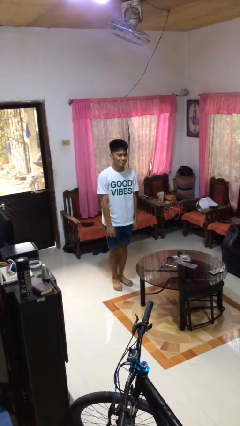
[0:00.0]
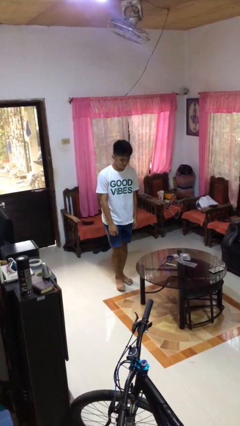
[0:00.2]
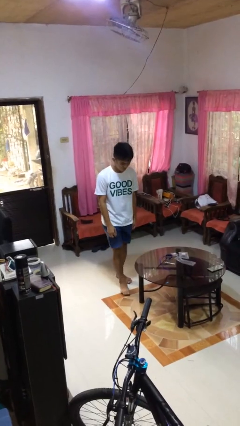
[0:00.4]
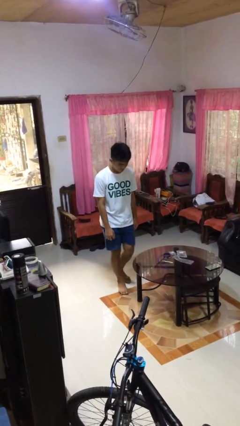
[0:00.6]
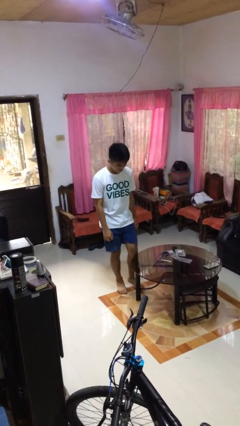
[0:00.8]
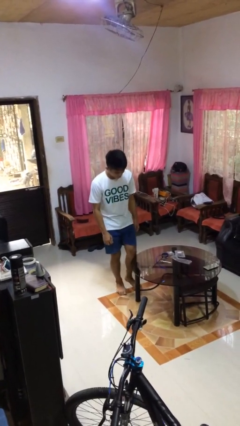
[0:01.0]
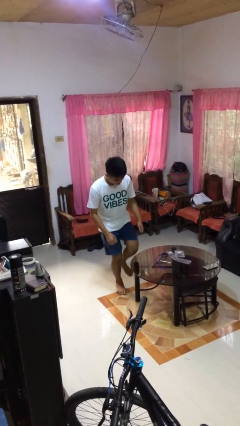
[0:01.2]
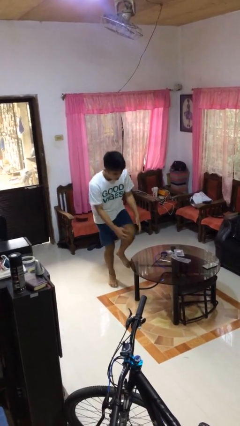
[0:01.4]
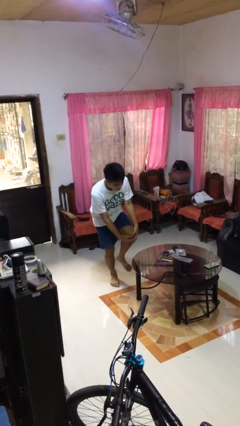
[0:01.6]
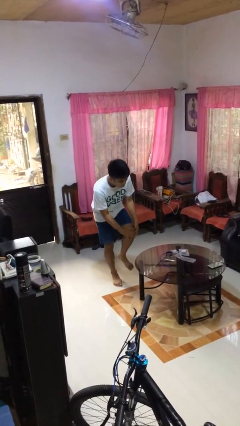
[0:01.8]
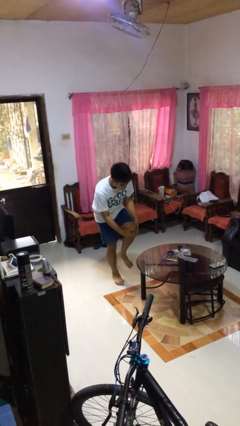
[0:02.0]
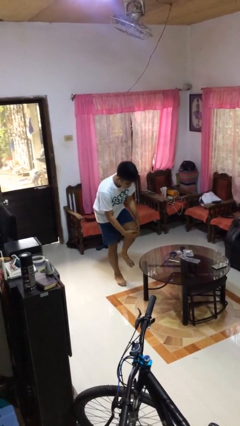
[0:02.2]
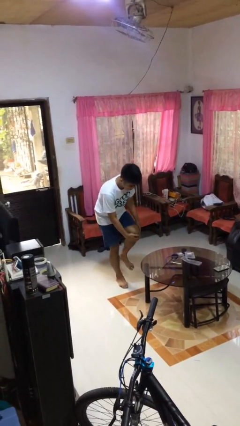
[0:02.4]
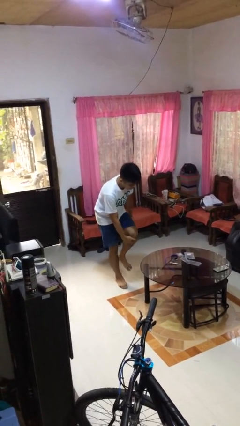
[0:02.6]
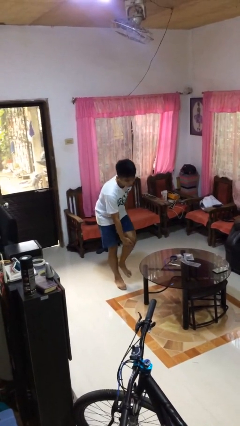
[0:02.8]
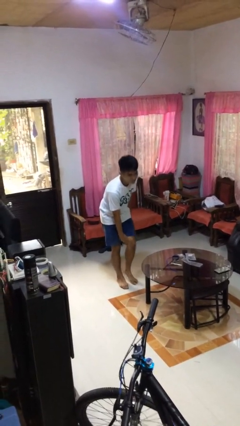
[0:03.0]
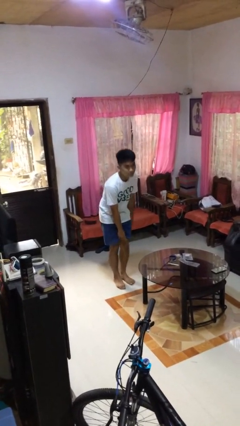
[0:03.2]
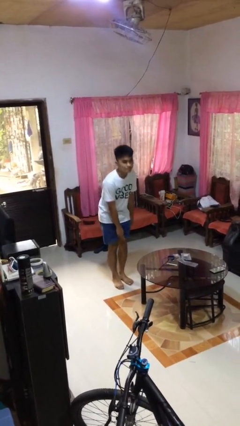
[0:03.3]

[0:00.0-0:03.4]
person bumps into table

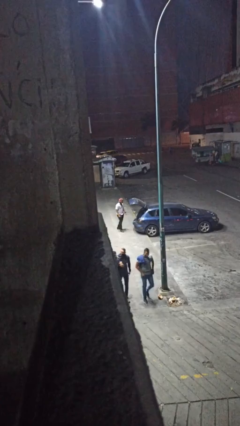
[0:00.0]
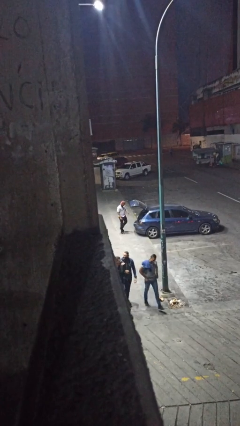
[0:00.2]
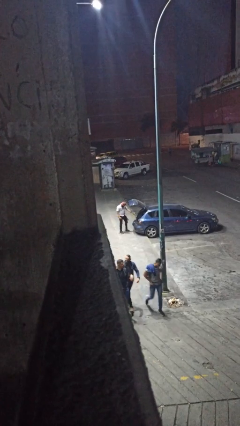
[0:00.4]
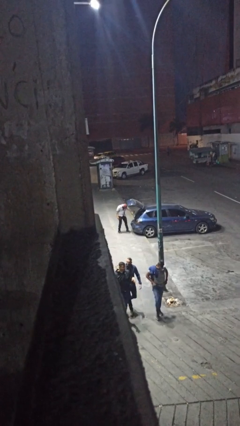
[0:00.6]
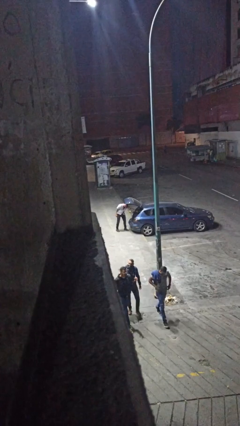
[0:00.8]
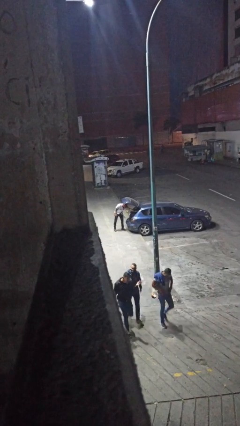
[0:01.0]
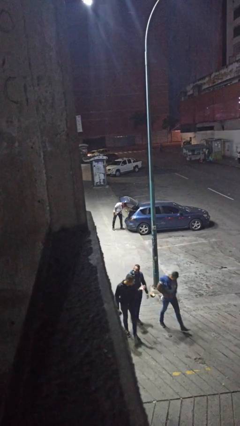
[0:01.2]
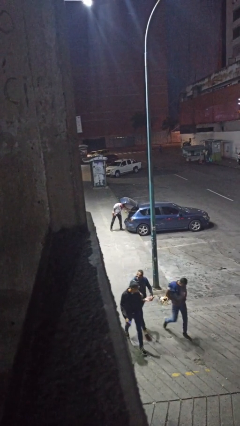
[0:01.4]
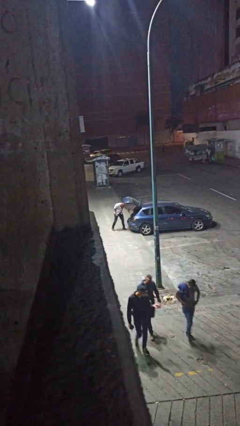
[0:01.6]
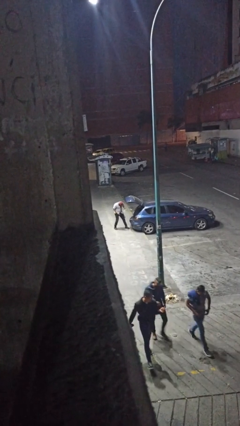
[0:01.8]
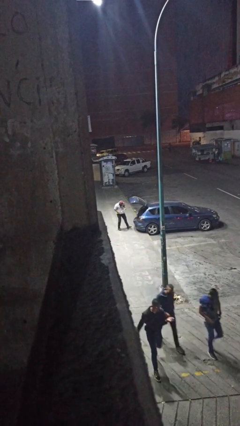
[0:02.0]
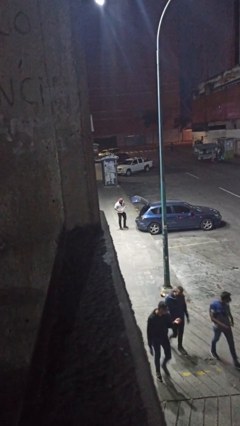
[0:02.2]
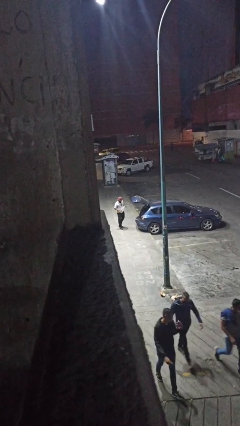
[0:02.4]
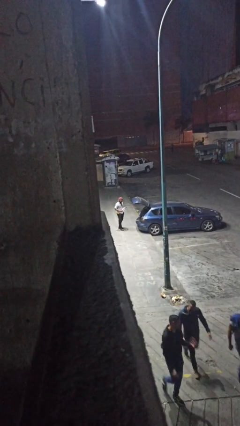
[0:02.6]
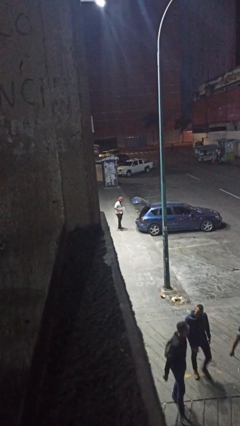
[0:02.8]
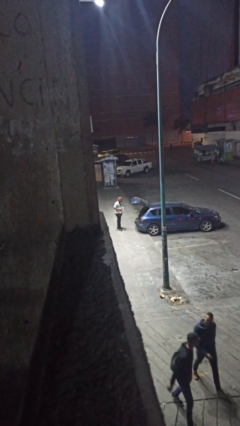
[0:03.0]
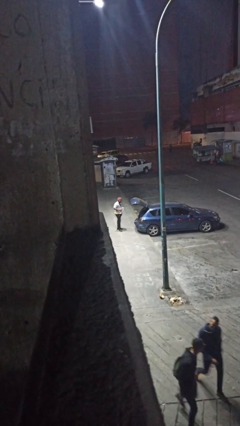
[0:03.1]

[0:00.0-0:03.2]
person unloads car

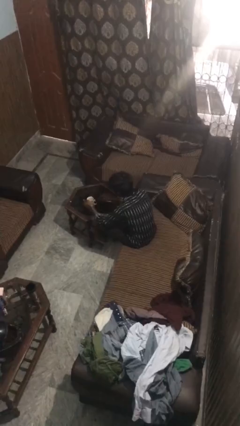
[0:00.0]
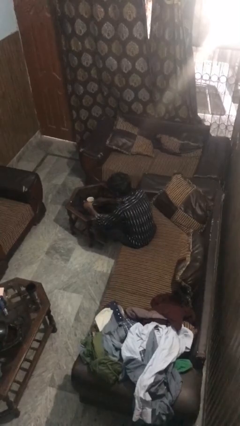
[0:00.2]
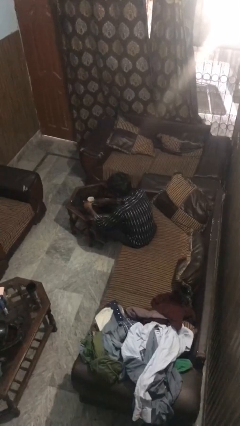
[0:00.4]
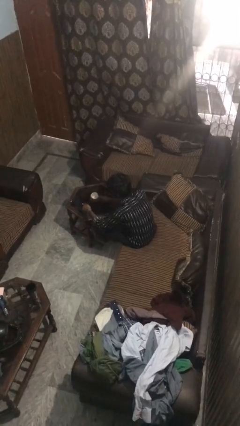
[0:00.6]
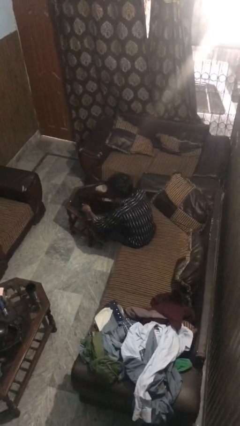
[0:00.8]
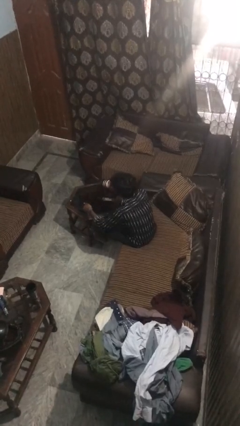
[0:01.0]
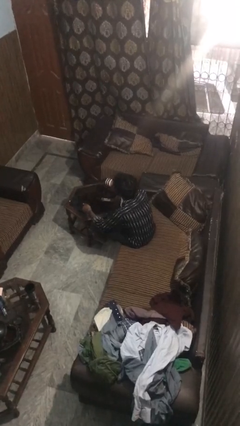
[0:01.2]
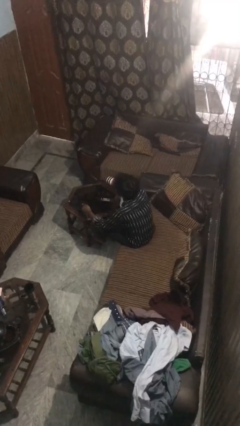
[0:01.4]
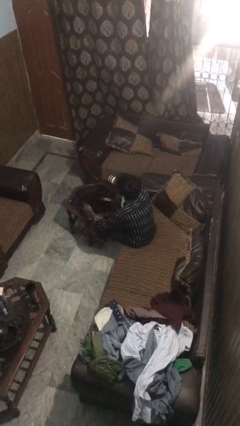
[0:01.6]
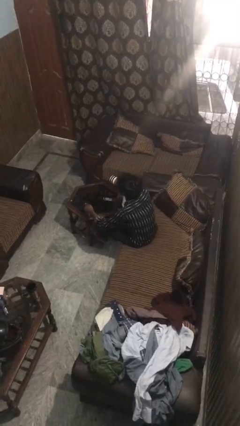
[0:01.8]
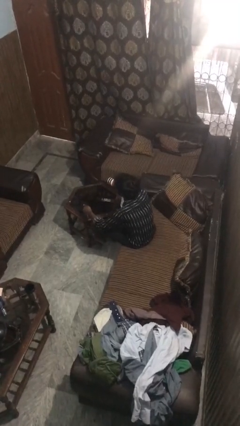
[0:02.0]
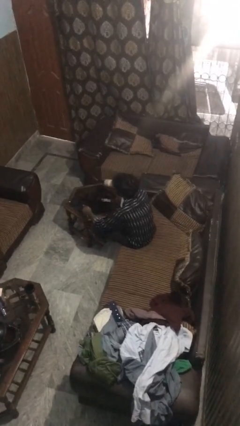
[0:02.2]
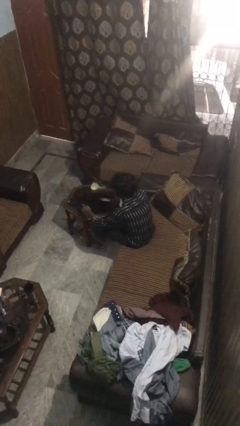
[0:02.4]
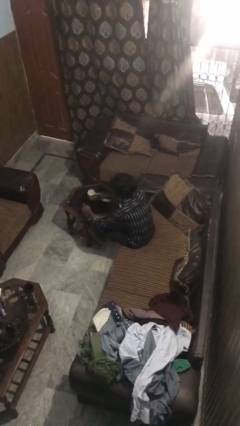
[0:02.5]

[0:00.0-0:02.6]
person drinks from cup

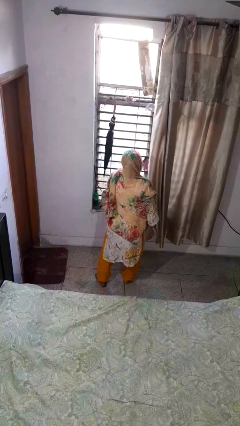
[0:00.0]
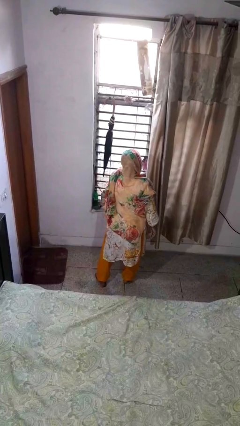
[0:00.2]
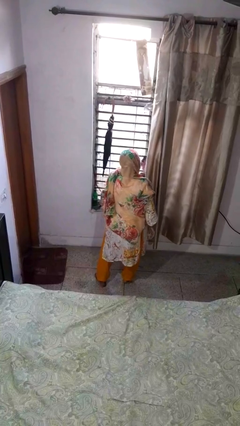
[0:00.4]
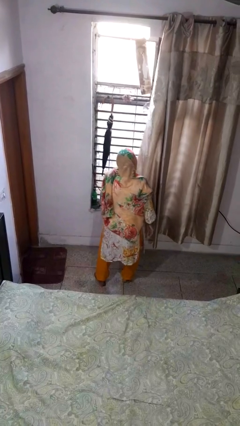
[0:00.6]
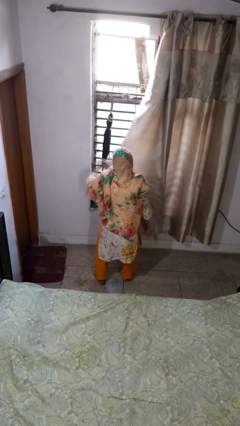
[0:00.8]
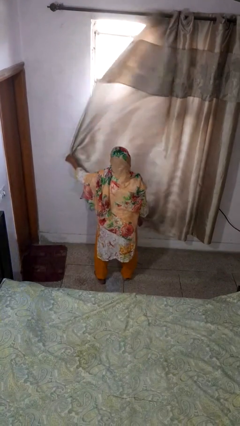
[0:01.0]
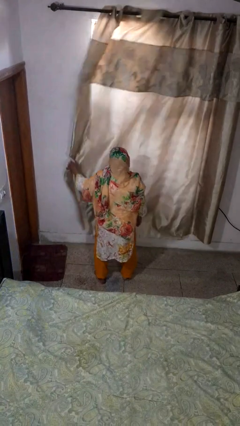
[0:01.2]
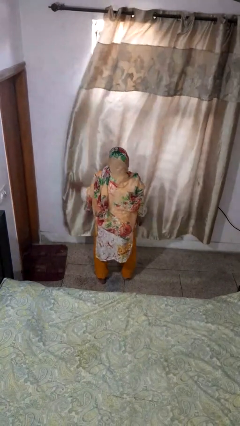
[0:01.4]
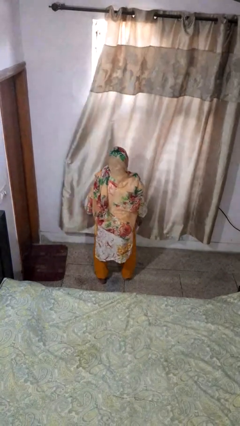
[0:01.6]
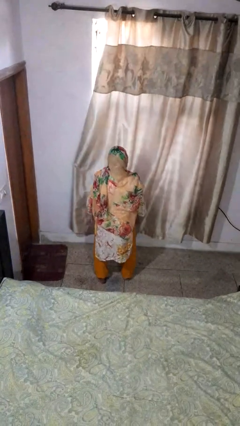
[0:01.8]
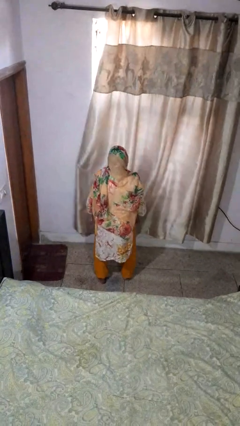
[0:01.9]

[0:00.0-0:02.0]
person closes curtains

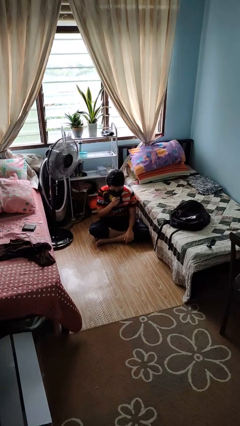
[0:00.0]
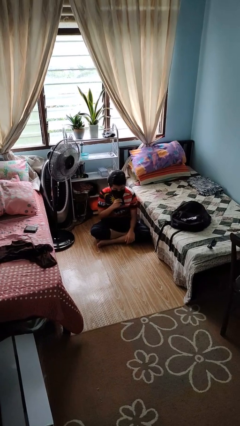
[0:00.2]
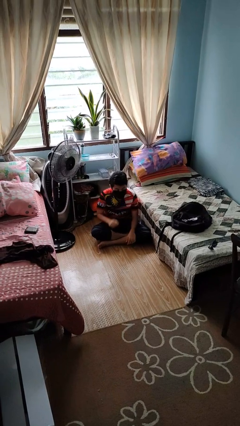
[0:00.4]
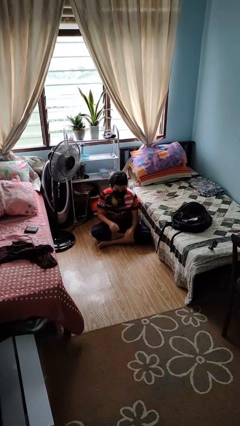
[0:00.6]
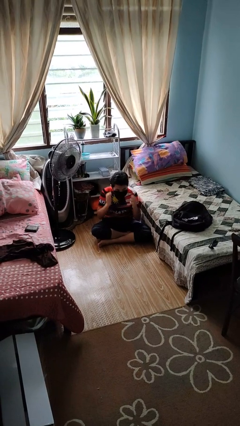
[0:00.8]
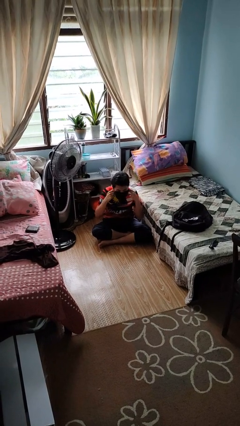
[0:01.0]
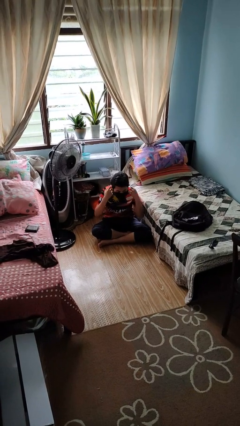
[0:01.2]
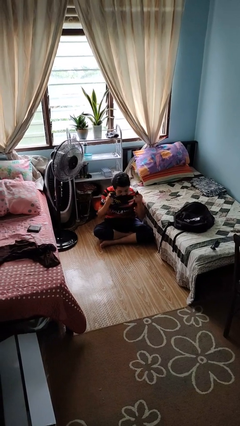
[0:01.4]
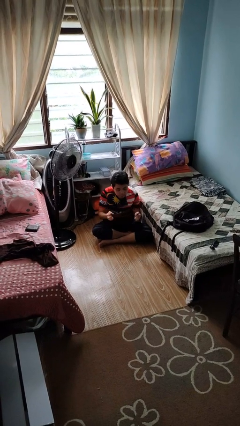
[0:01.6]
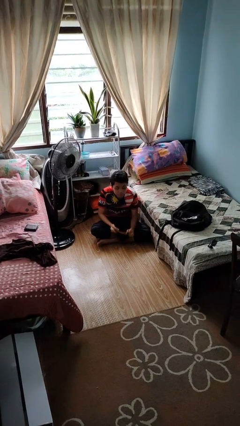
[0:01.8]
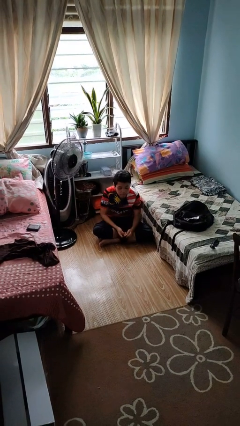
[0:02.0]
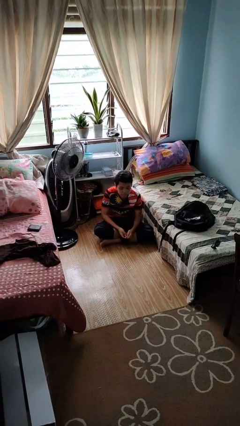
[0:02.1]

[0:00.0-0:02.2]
person takes off facemask

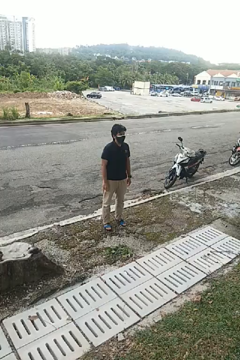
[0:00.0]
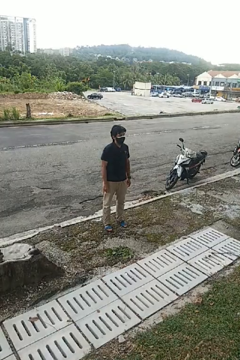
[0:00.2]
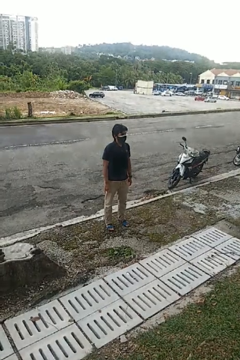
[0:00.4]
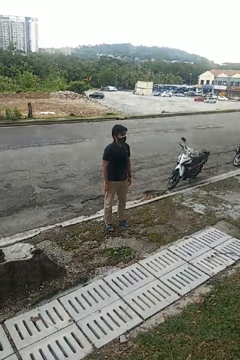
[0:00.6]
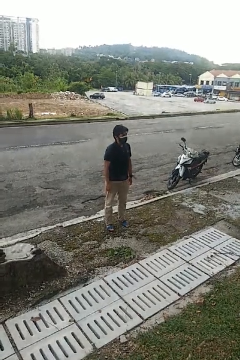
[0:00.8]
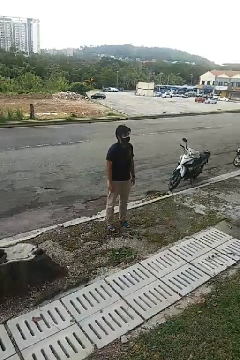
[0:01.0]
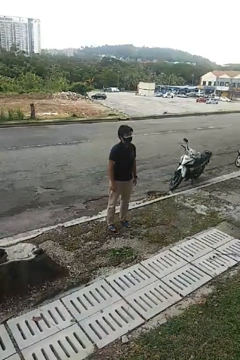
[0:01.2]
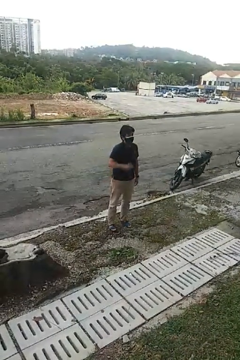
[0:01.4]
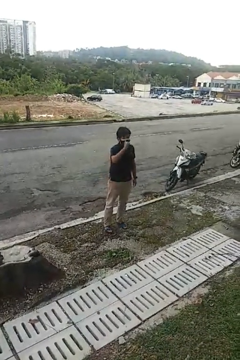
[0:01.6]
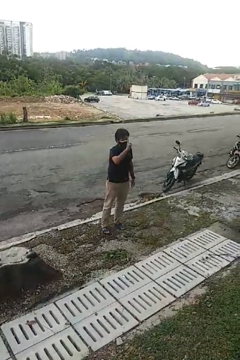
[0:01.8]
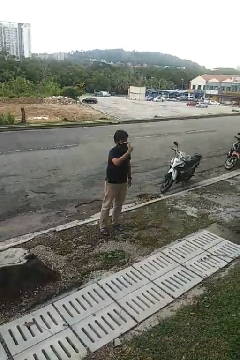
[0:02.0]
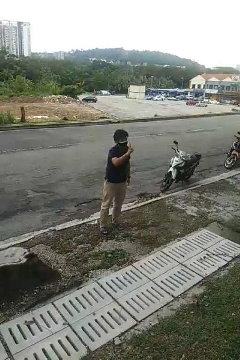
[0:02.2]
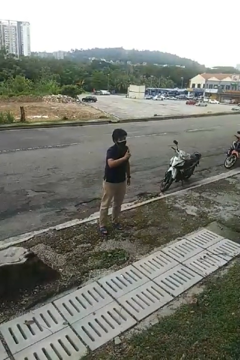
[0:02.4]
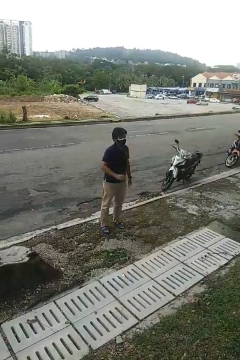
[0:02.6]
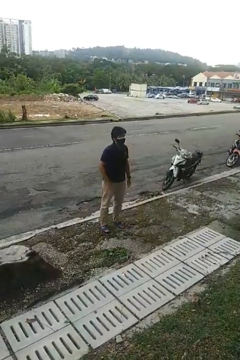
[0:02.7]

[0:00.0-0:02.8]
person gestures number one

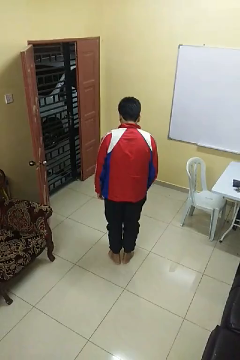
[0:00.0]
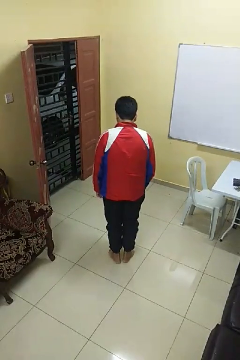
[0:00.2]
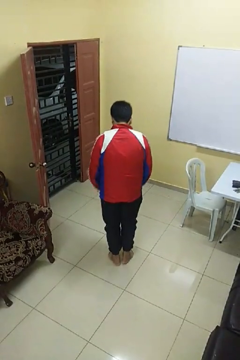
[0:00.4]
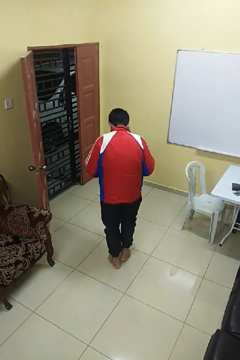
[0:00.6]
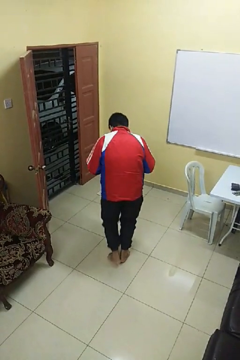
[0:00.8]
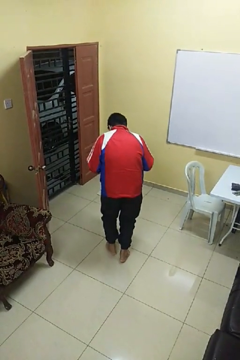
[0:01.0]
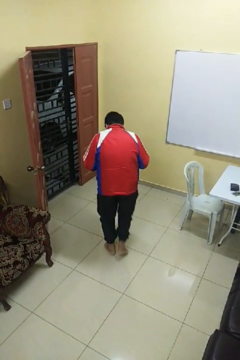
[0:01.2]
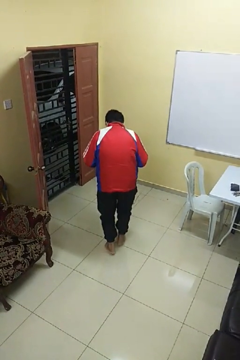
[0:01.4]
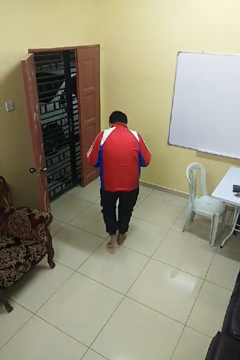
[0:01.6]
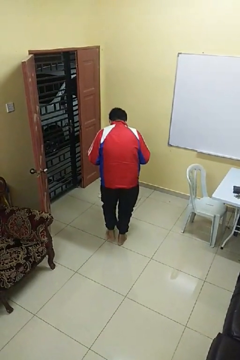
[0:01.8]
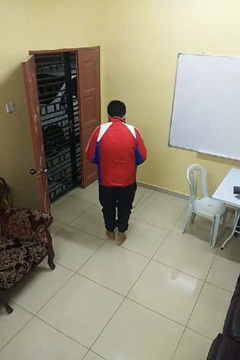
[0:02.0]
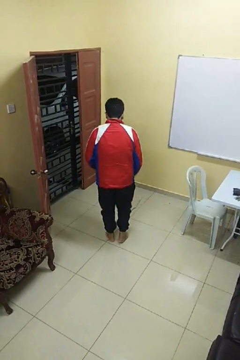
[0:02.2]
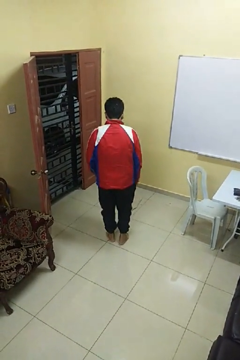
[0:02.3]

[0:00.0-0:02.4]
person walks tiptoe
